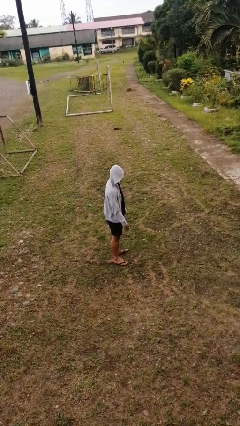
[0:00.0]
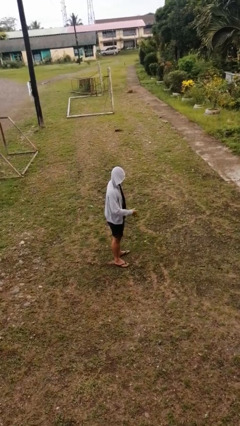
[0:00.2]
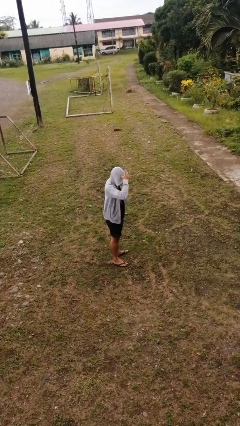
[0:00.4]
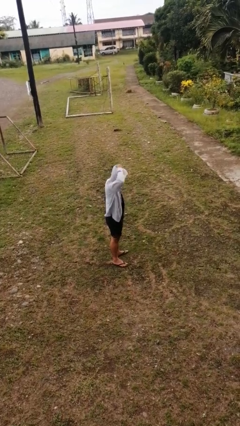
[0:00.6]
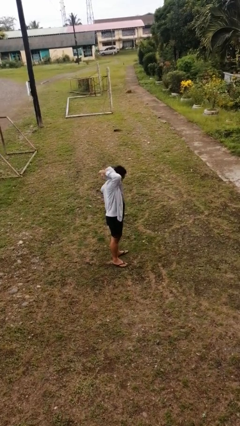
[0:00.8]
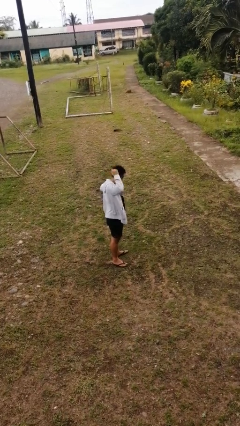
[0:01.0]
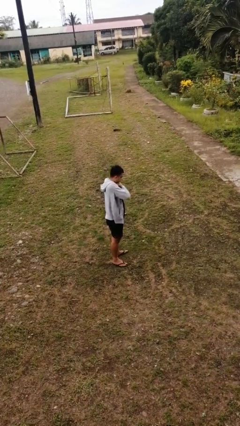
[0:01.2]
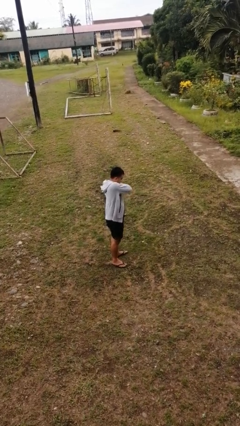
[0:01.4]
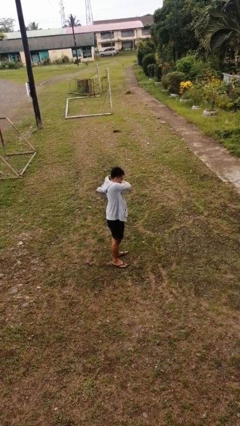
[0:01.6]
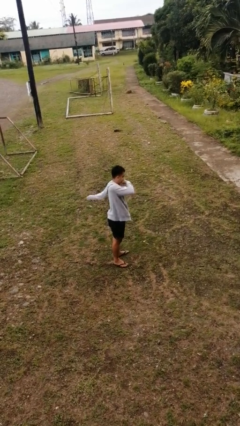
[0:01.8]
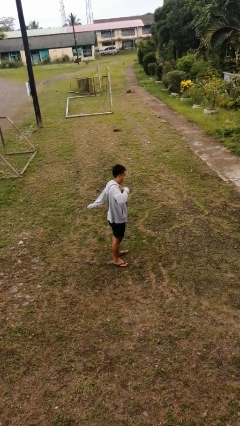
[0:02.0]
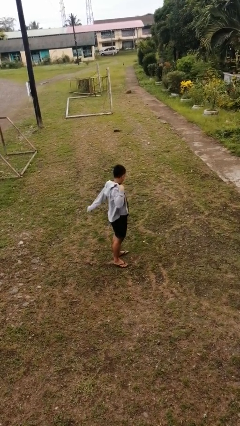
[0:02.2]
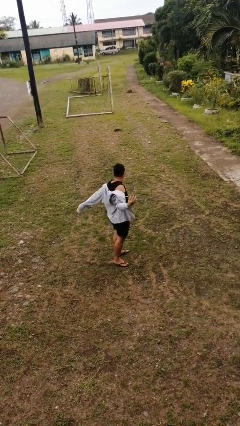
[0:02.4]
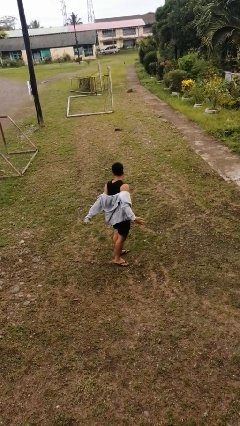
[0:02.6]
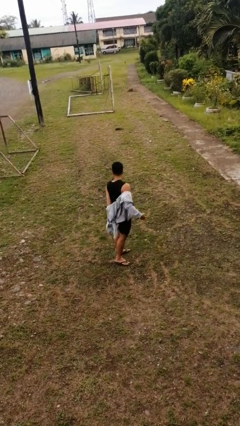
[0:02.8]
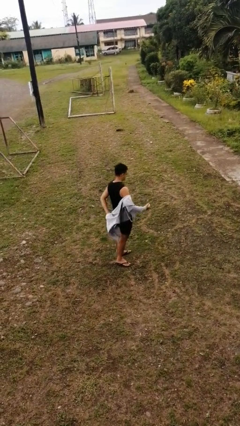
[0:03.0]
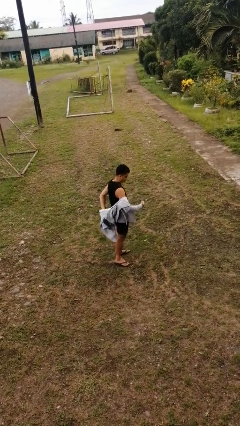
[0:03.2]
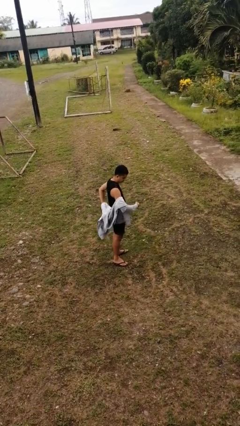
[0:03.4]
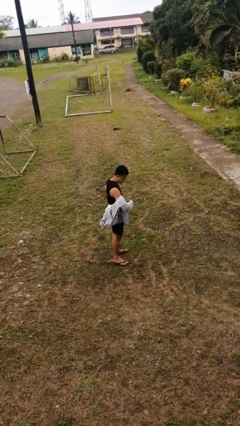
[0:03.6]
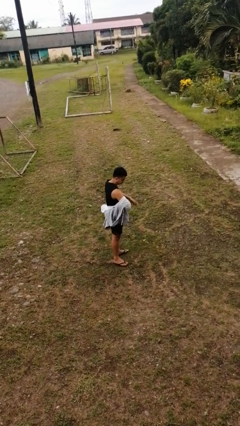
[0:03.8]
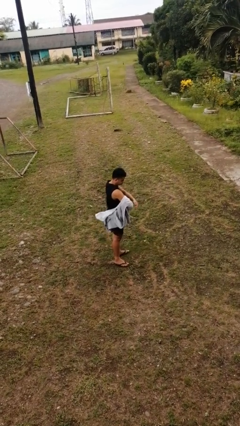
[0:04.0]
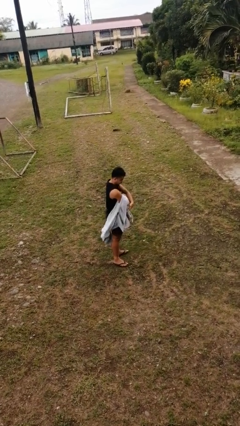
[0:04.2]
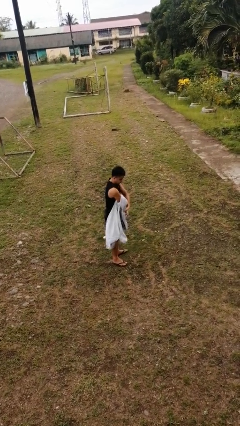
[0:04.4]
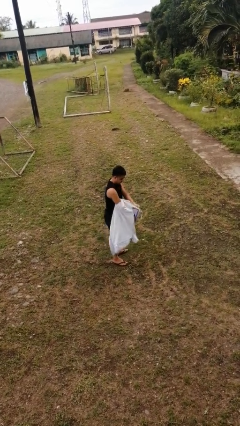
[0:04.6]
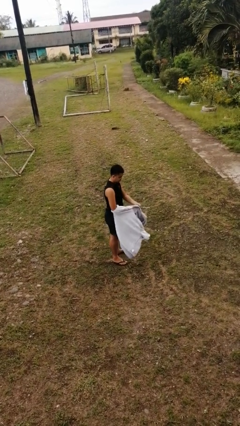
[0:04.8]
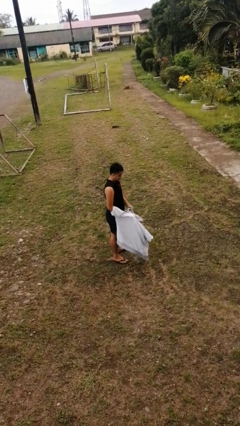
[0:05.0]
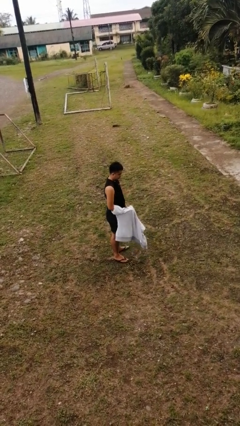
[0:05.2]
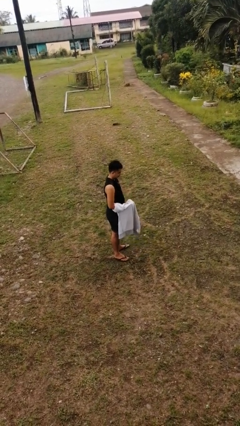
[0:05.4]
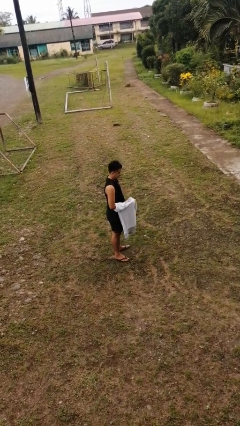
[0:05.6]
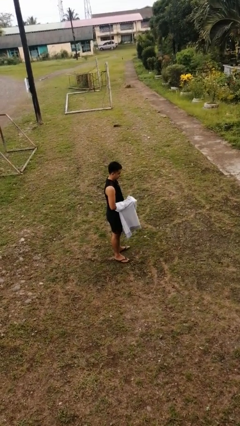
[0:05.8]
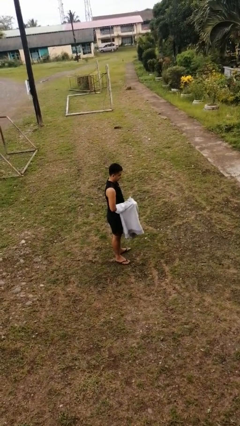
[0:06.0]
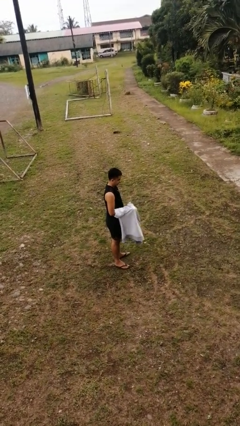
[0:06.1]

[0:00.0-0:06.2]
person takes off hoodie

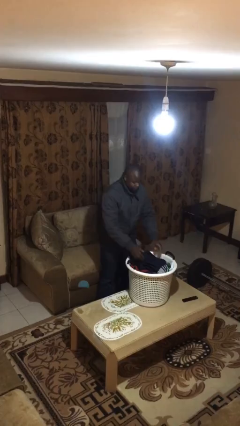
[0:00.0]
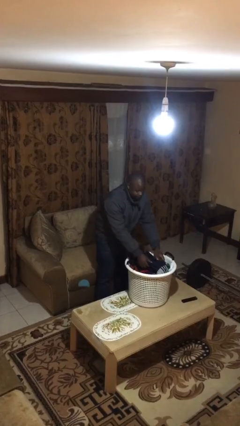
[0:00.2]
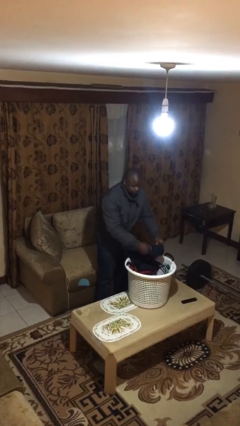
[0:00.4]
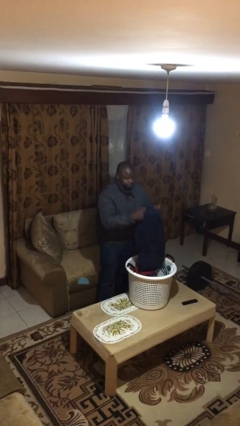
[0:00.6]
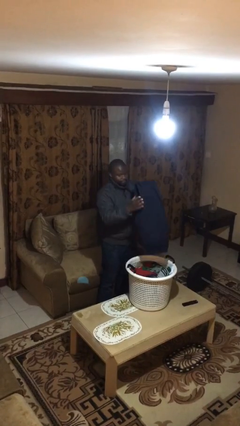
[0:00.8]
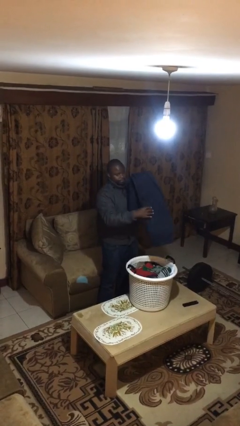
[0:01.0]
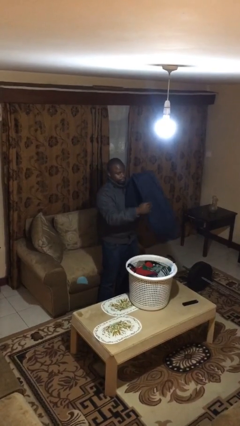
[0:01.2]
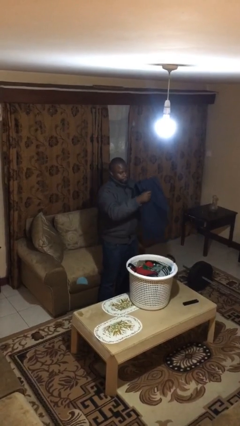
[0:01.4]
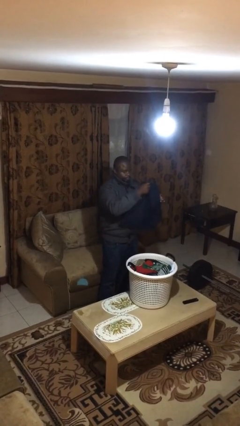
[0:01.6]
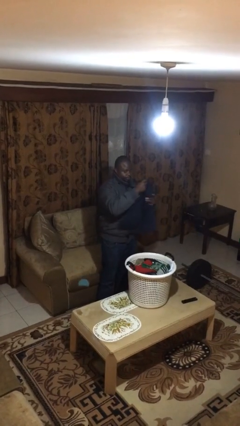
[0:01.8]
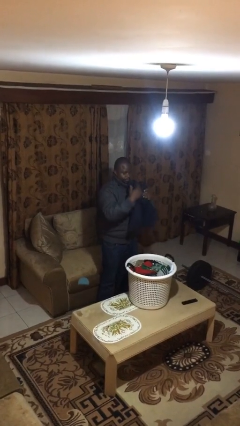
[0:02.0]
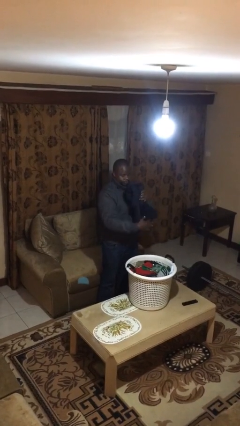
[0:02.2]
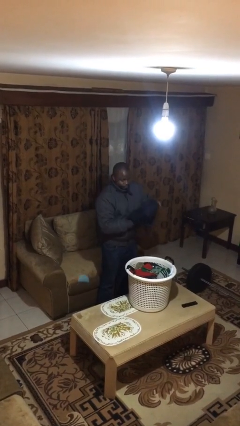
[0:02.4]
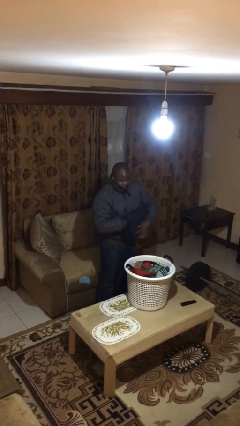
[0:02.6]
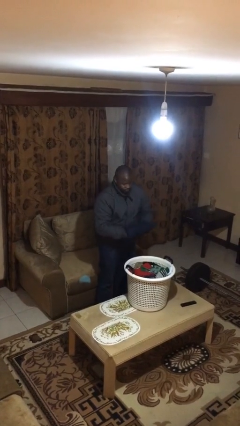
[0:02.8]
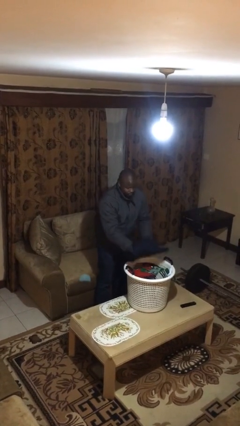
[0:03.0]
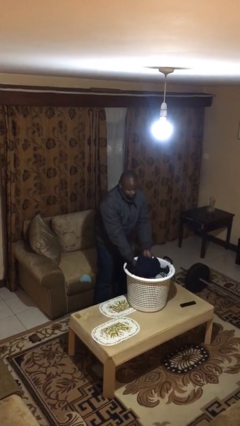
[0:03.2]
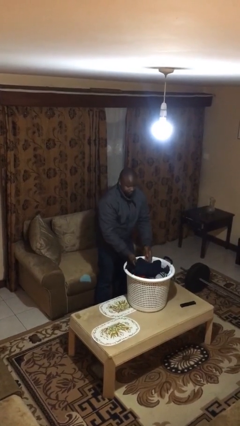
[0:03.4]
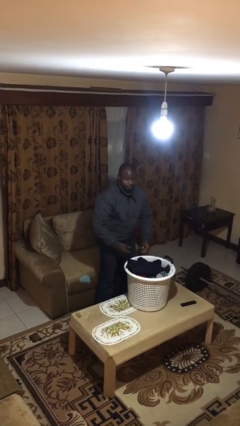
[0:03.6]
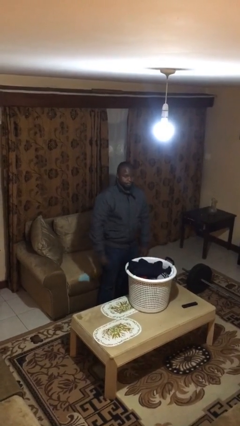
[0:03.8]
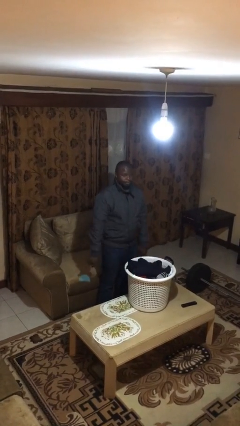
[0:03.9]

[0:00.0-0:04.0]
person folds pants

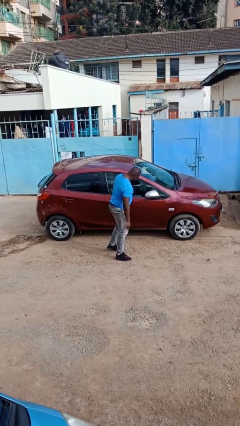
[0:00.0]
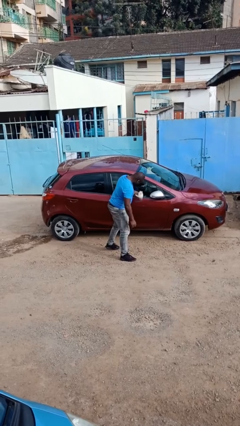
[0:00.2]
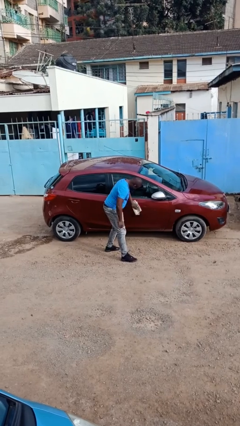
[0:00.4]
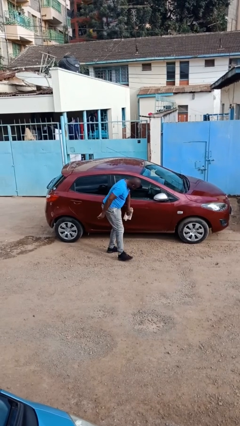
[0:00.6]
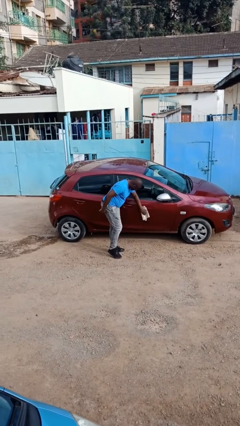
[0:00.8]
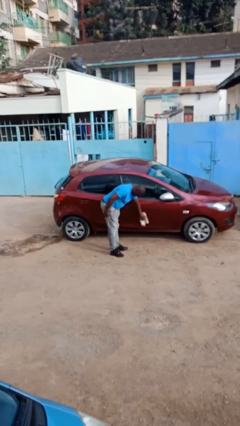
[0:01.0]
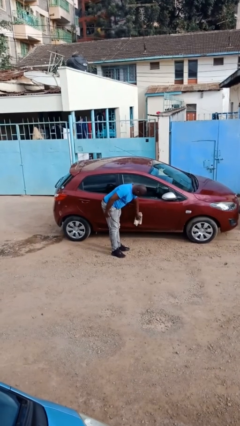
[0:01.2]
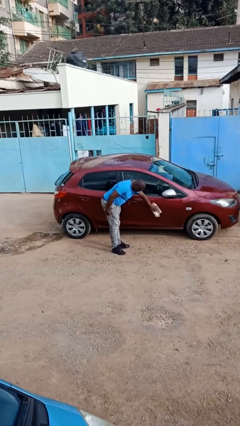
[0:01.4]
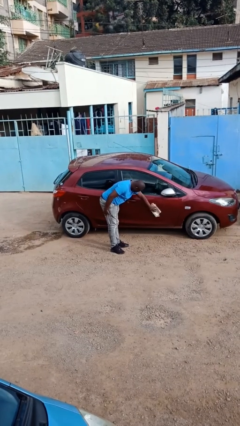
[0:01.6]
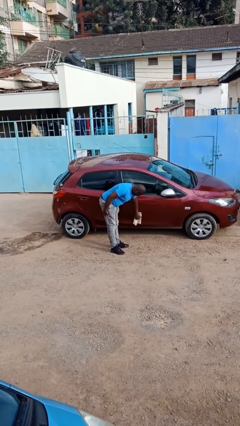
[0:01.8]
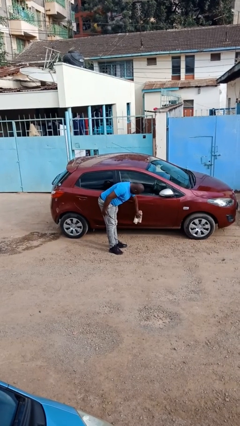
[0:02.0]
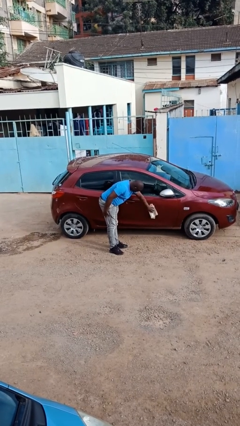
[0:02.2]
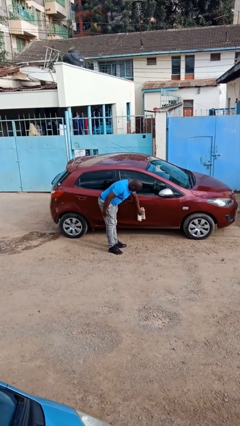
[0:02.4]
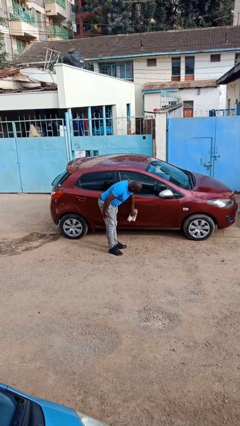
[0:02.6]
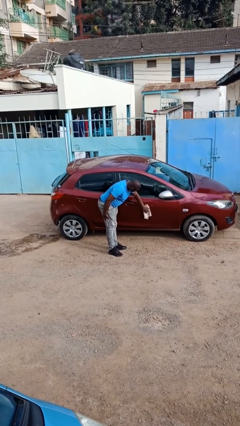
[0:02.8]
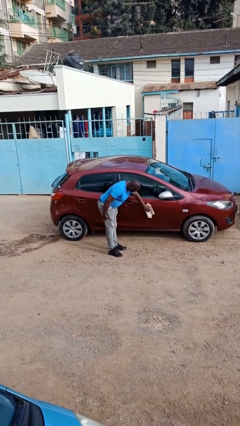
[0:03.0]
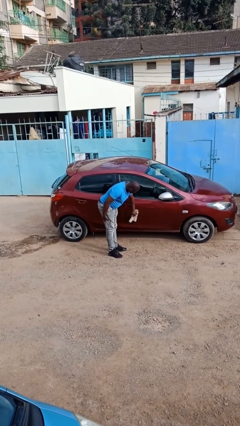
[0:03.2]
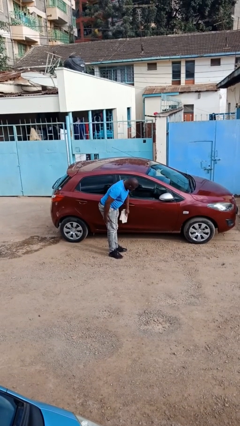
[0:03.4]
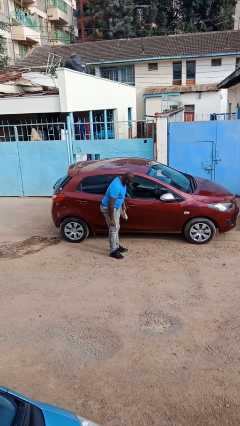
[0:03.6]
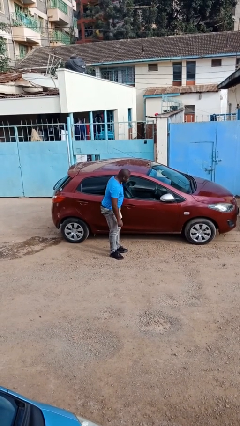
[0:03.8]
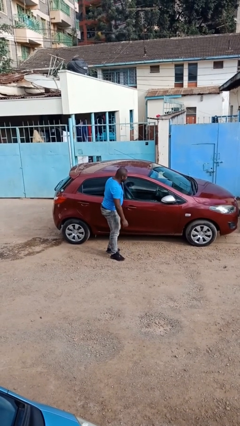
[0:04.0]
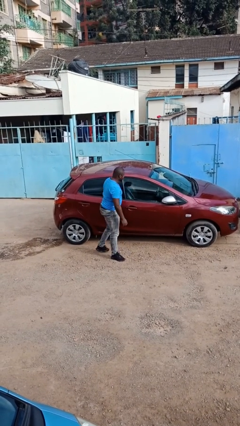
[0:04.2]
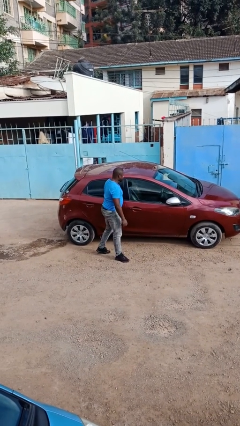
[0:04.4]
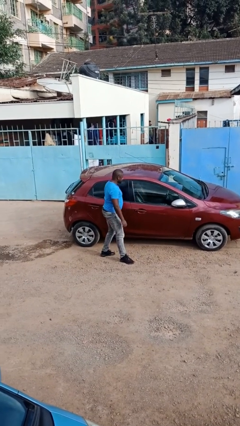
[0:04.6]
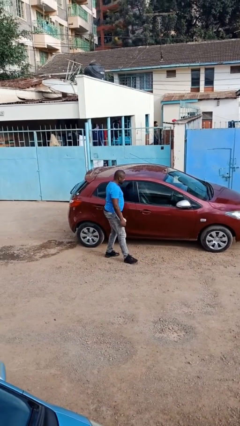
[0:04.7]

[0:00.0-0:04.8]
person polishes car with rag

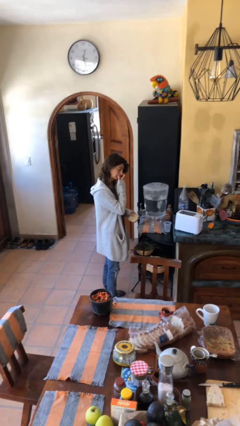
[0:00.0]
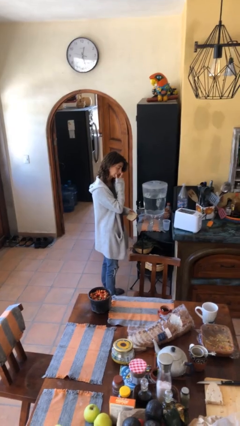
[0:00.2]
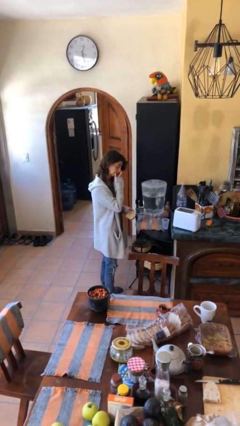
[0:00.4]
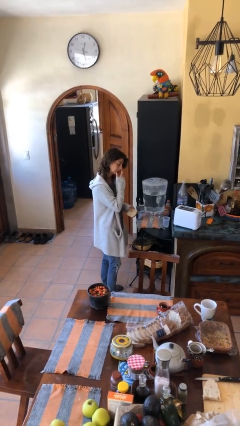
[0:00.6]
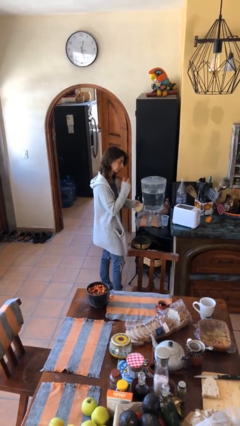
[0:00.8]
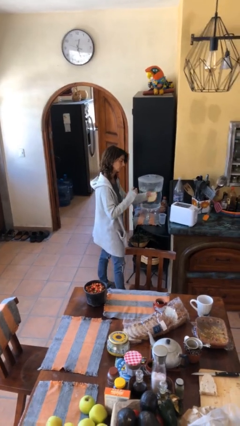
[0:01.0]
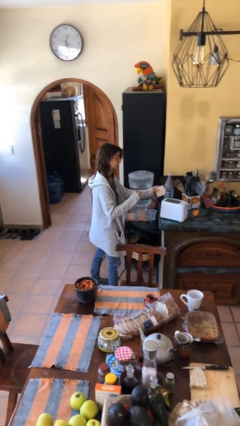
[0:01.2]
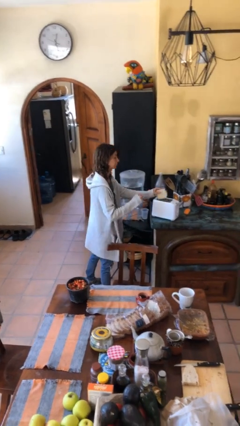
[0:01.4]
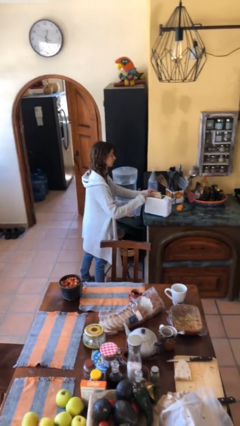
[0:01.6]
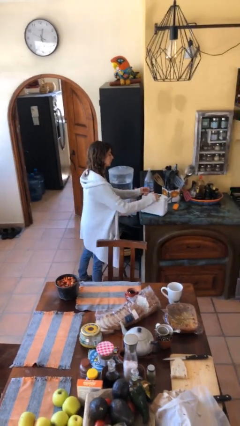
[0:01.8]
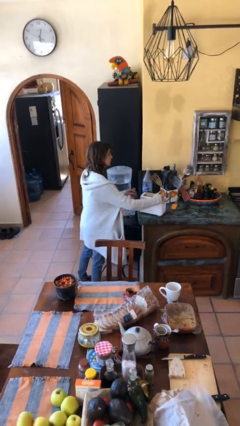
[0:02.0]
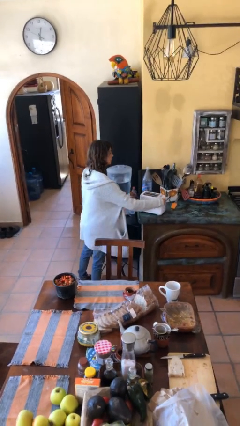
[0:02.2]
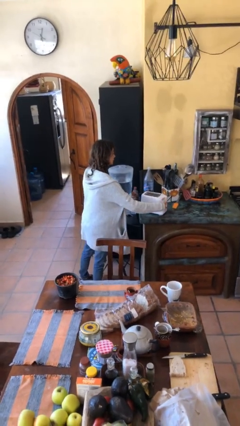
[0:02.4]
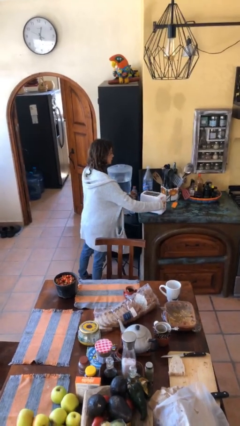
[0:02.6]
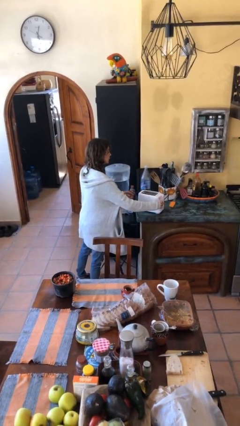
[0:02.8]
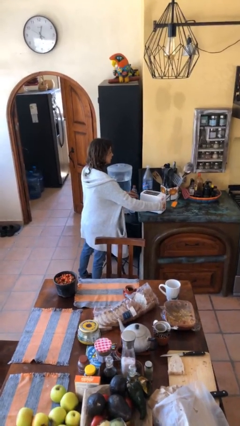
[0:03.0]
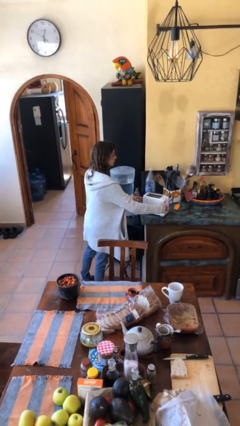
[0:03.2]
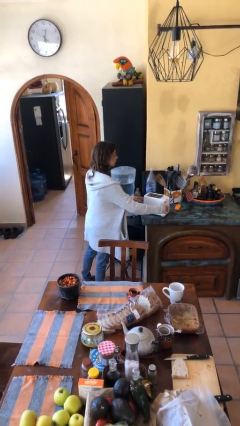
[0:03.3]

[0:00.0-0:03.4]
person puts object into toaster
